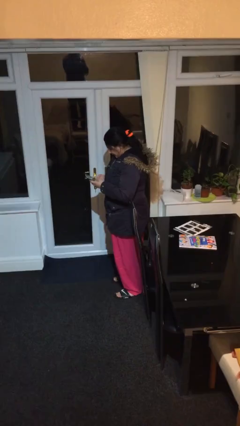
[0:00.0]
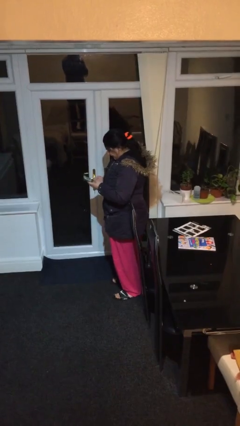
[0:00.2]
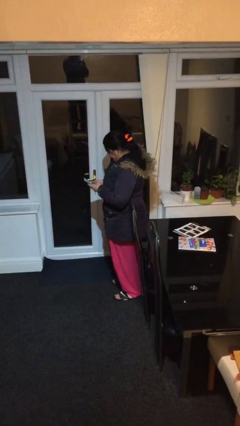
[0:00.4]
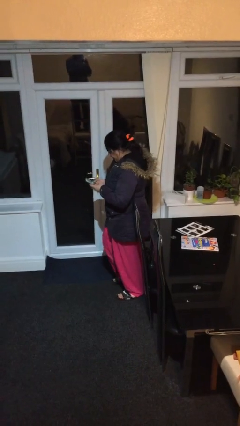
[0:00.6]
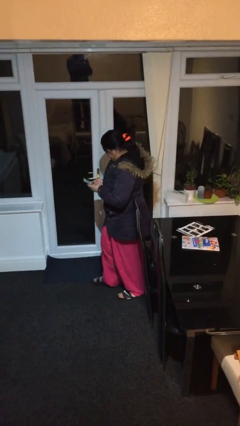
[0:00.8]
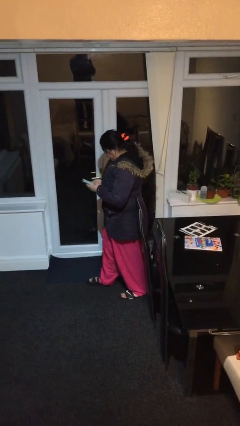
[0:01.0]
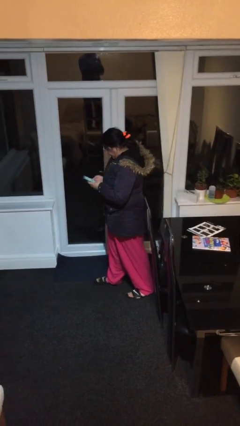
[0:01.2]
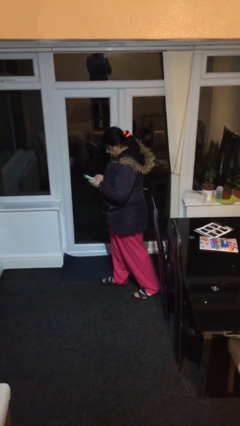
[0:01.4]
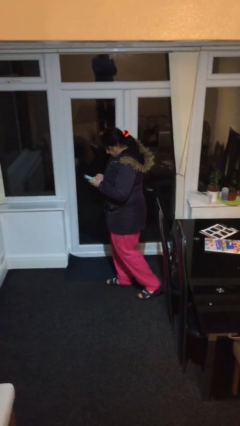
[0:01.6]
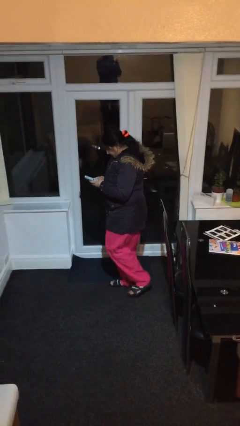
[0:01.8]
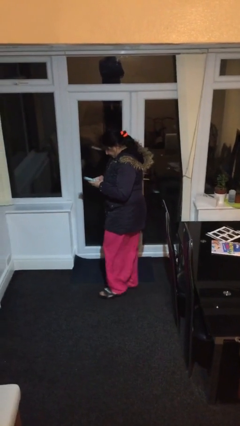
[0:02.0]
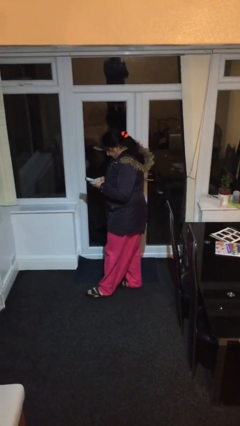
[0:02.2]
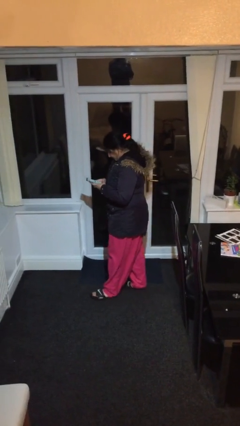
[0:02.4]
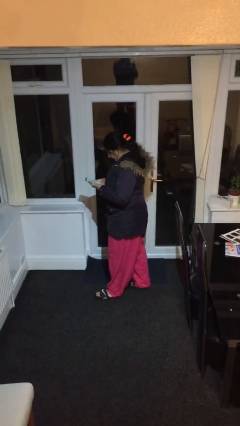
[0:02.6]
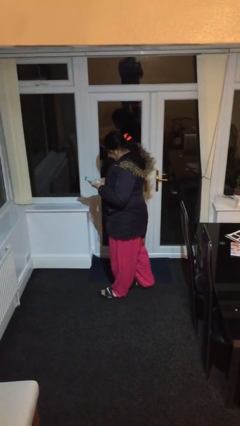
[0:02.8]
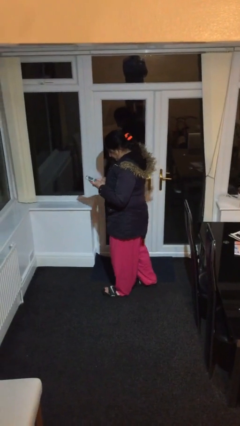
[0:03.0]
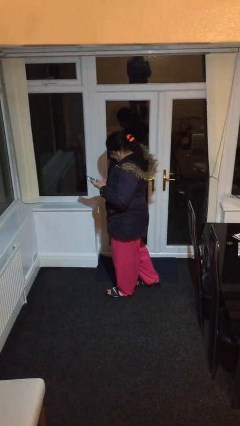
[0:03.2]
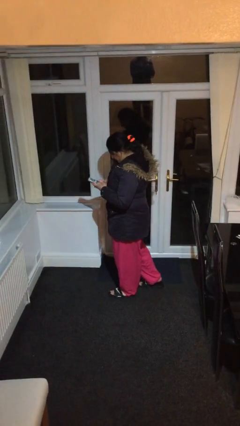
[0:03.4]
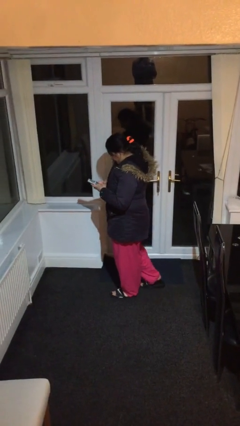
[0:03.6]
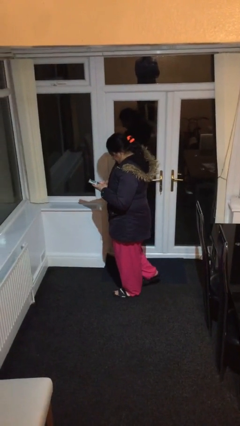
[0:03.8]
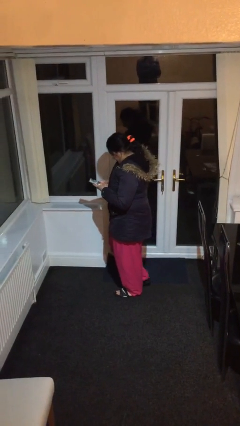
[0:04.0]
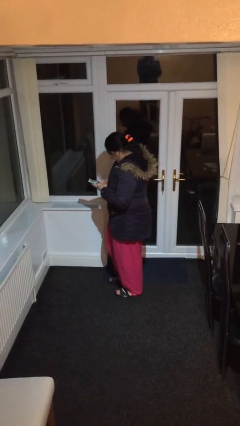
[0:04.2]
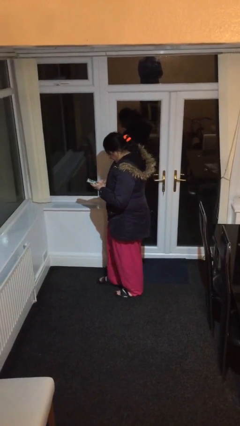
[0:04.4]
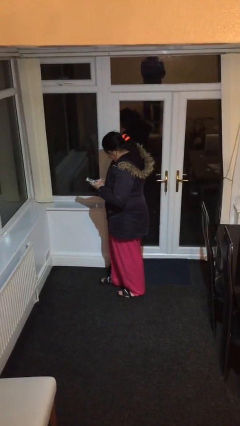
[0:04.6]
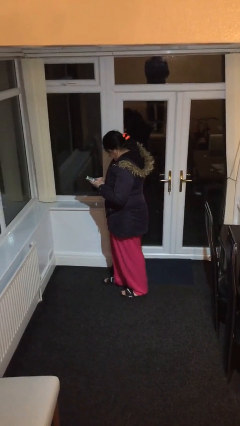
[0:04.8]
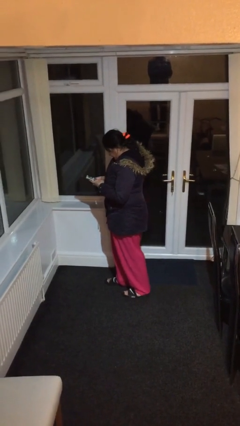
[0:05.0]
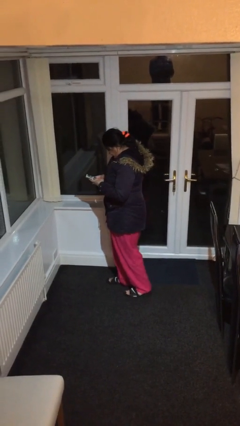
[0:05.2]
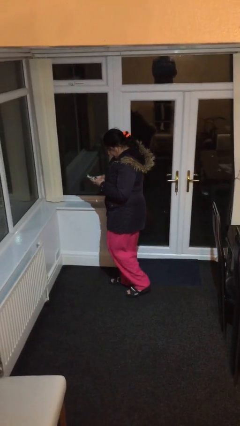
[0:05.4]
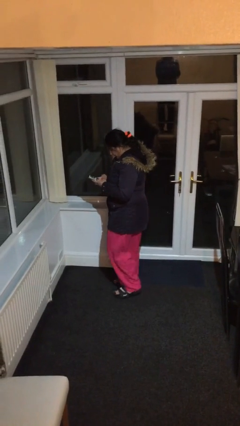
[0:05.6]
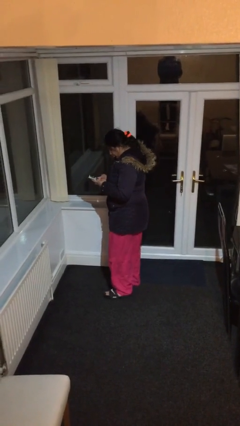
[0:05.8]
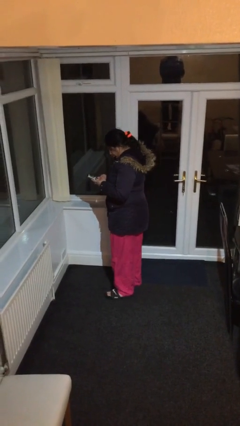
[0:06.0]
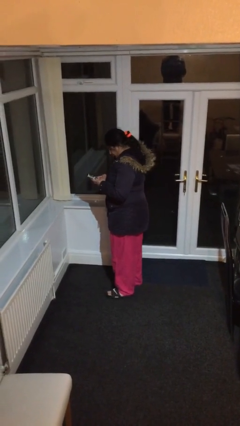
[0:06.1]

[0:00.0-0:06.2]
person texts on phone

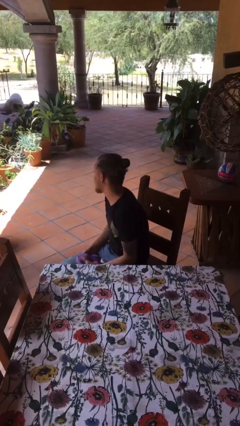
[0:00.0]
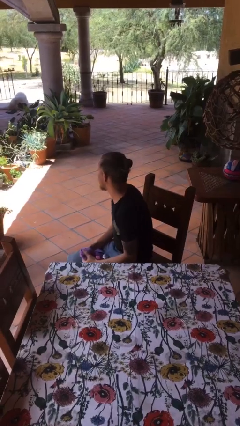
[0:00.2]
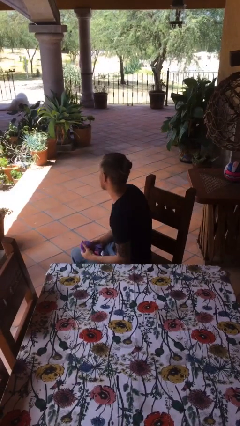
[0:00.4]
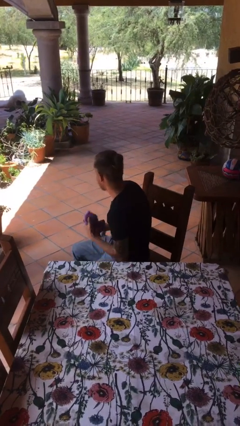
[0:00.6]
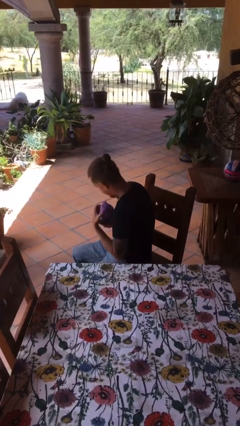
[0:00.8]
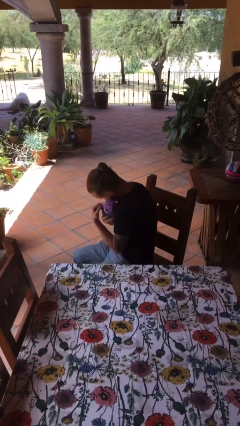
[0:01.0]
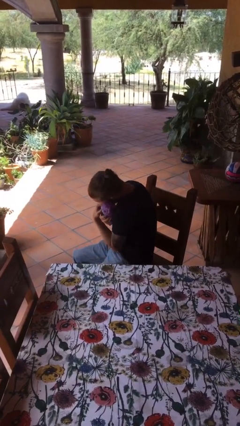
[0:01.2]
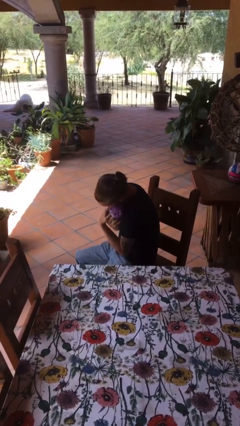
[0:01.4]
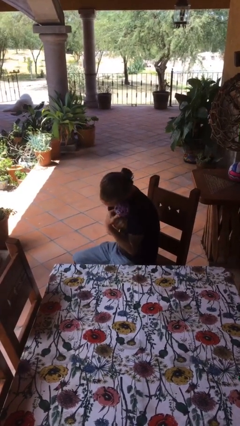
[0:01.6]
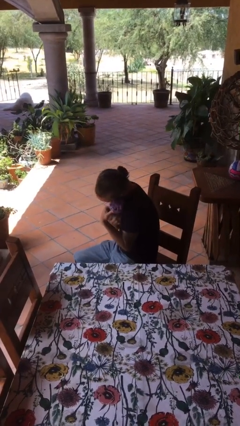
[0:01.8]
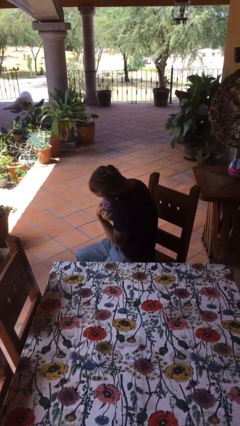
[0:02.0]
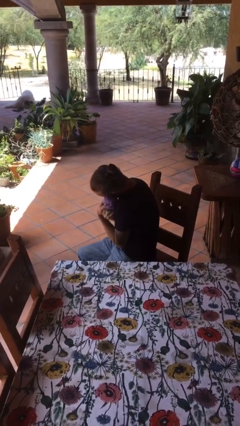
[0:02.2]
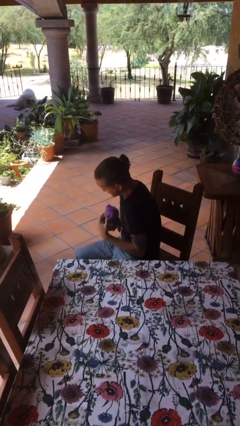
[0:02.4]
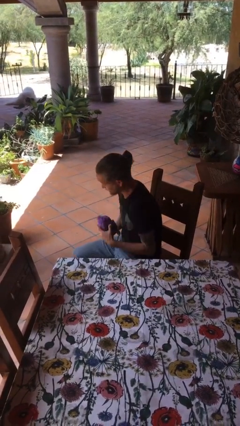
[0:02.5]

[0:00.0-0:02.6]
person hugs stuffed animal

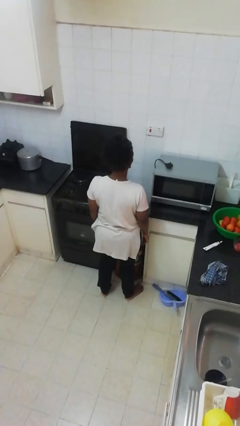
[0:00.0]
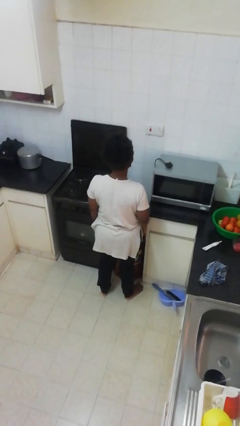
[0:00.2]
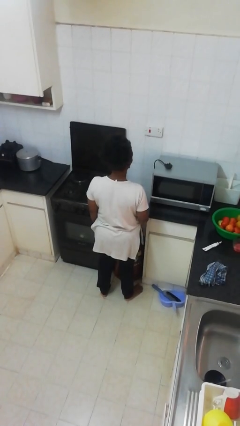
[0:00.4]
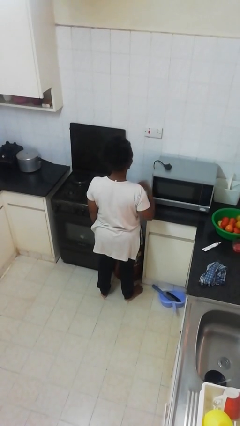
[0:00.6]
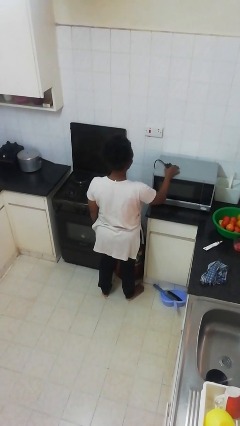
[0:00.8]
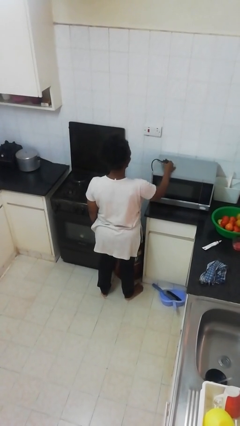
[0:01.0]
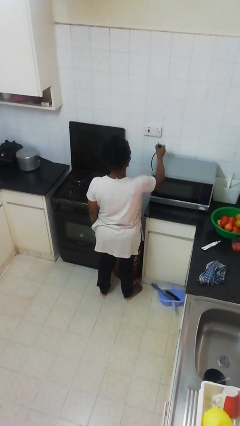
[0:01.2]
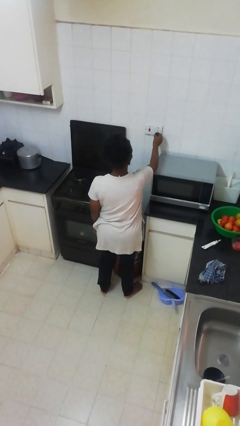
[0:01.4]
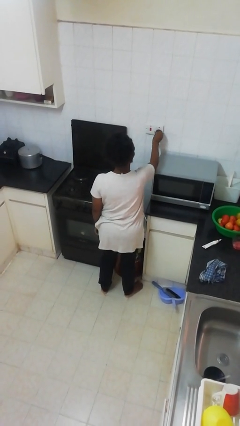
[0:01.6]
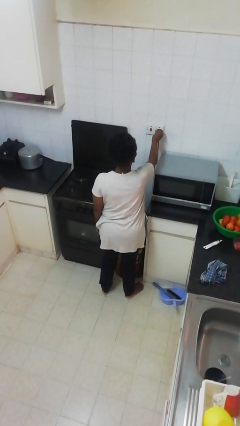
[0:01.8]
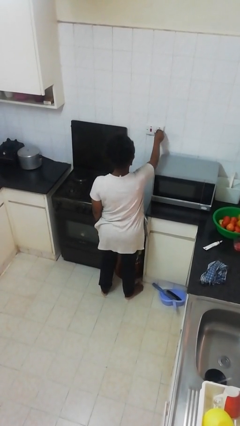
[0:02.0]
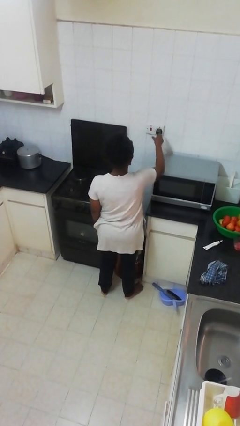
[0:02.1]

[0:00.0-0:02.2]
person plugs into electrical socket

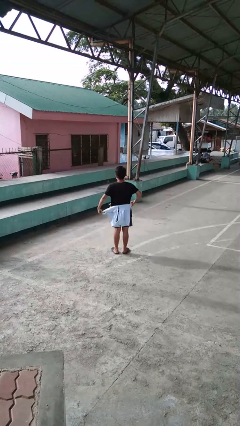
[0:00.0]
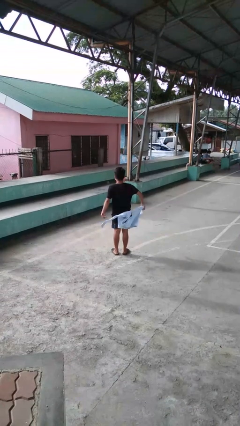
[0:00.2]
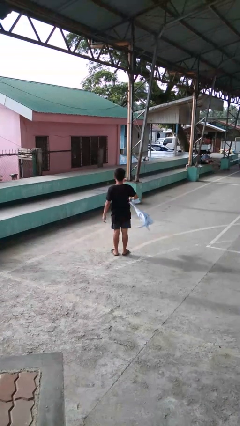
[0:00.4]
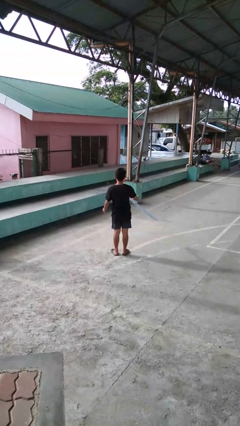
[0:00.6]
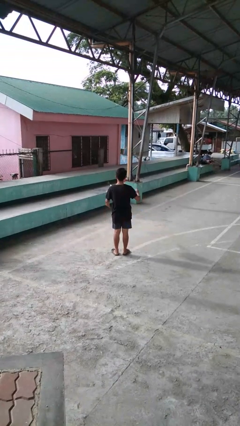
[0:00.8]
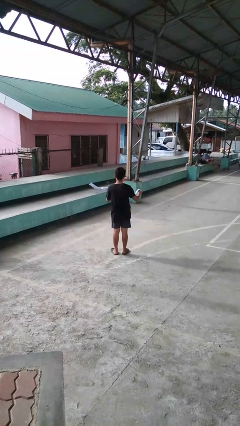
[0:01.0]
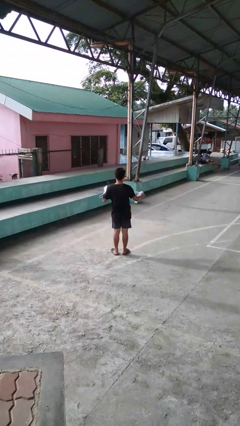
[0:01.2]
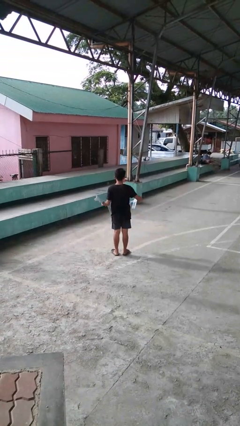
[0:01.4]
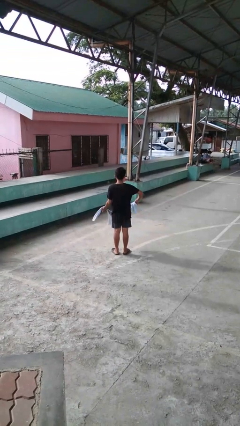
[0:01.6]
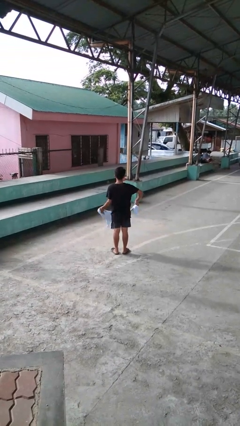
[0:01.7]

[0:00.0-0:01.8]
person unties jacket around waist

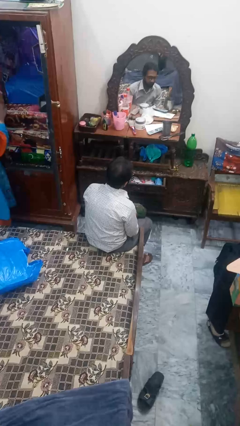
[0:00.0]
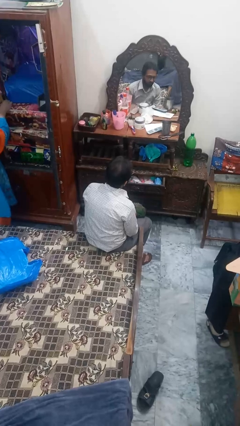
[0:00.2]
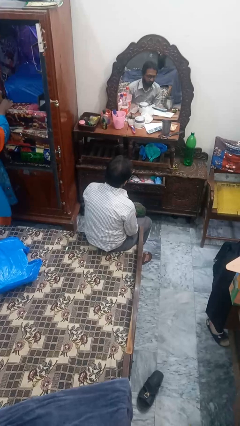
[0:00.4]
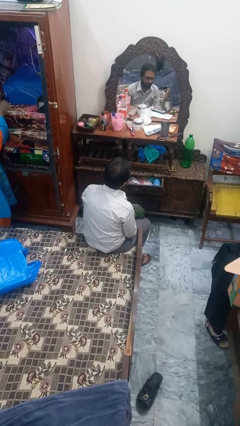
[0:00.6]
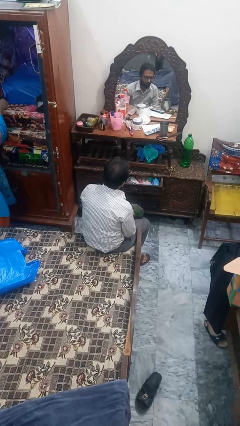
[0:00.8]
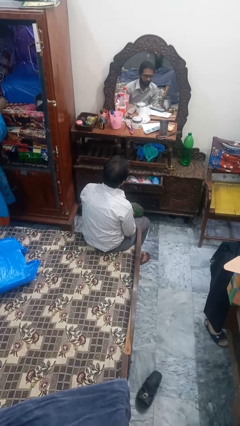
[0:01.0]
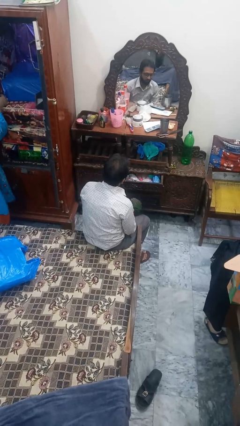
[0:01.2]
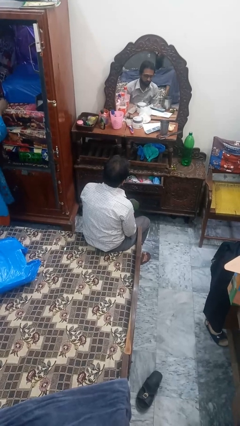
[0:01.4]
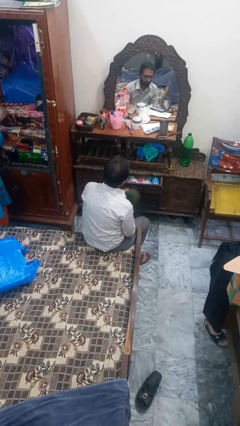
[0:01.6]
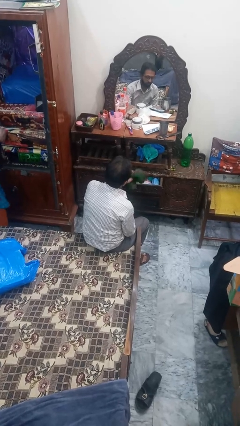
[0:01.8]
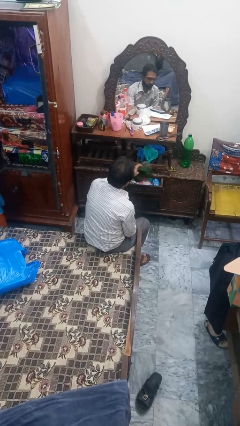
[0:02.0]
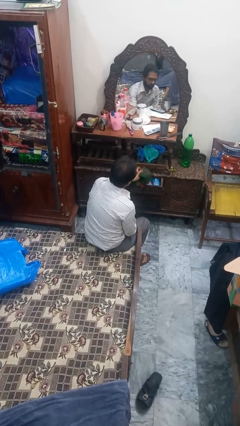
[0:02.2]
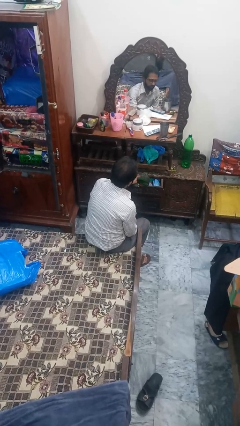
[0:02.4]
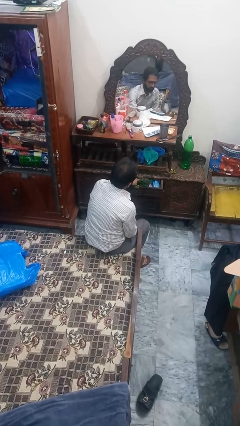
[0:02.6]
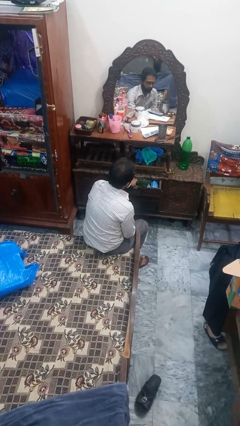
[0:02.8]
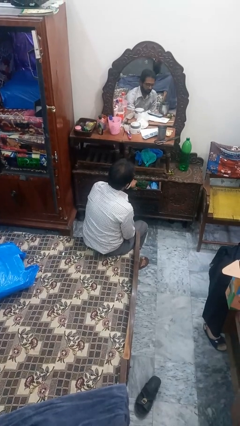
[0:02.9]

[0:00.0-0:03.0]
person puts clothes into dresser

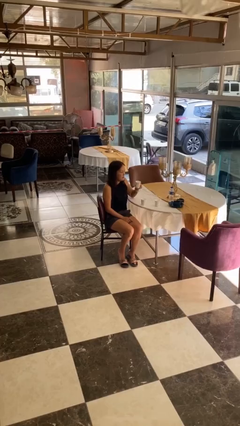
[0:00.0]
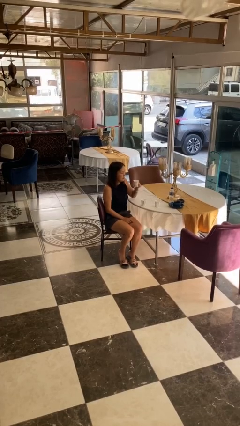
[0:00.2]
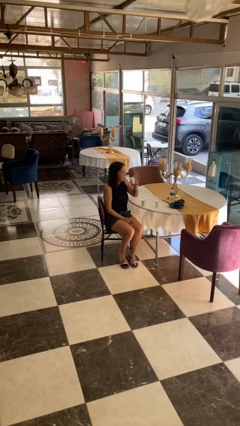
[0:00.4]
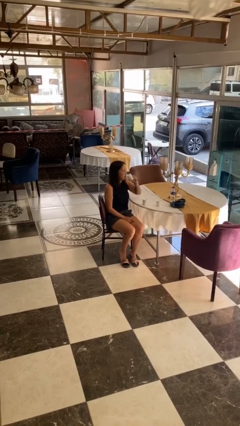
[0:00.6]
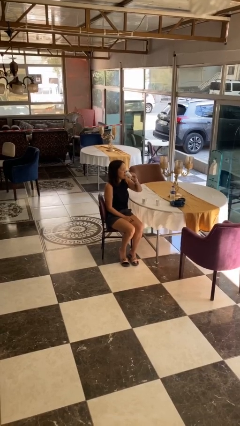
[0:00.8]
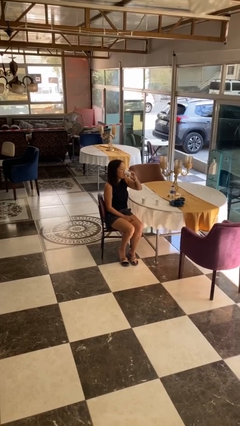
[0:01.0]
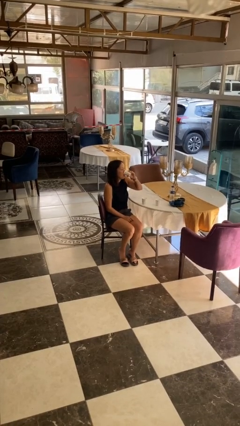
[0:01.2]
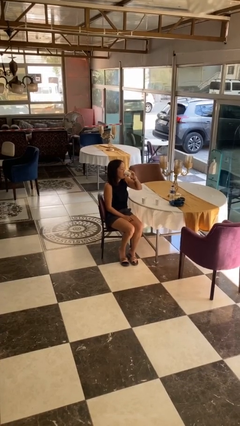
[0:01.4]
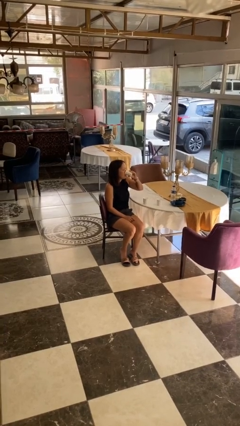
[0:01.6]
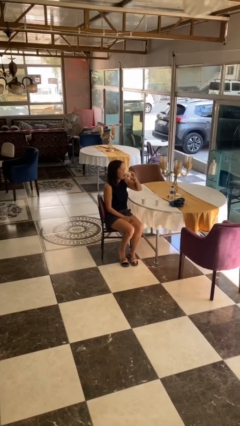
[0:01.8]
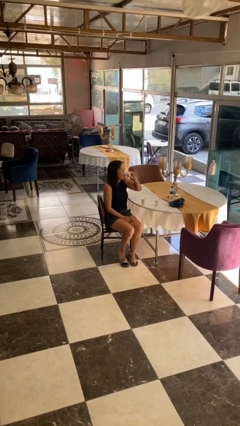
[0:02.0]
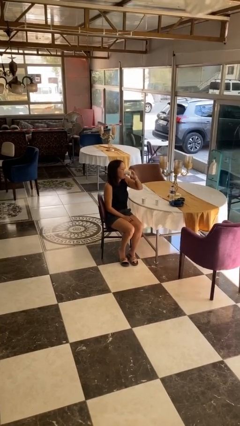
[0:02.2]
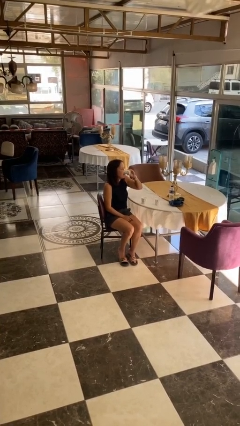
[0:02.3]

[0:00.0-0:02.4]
person drinks from shotglass
